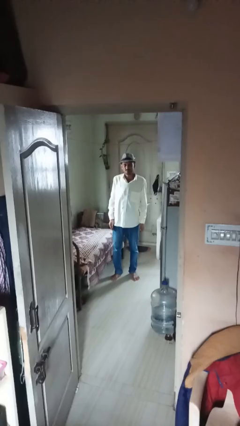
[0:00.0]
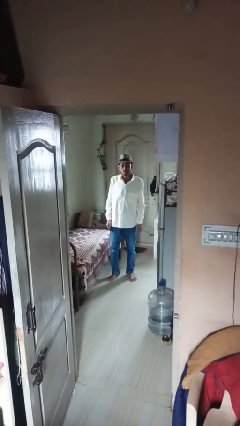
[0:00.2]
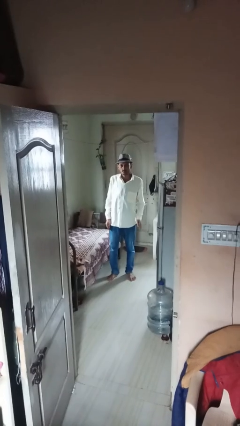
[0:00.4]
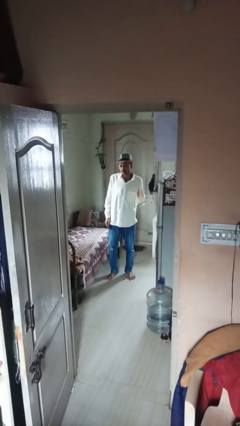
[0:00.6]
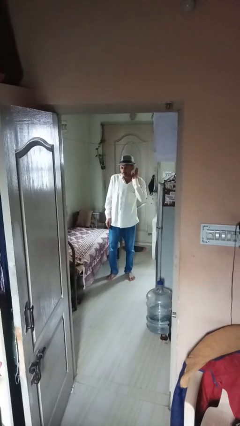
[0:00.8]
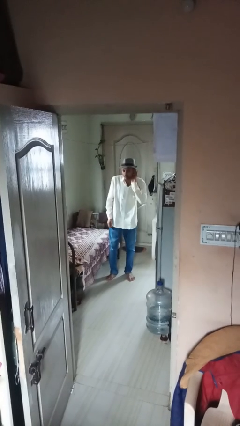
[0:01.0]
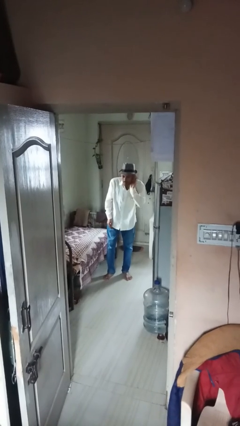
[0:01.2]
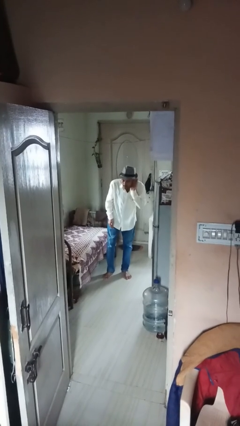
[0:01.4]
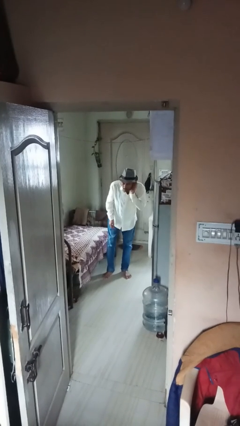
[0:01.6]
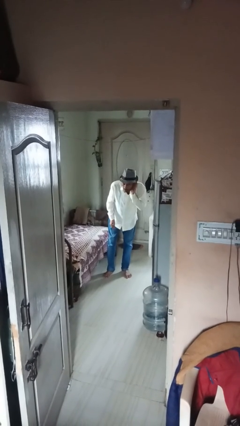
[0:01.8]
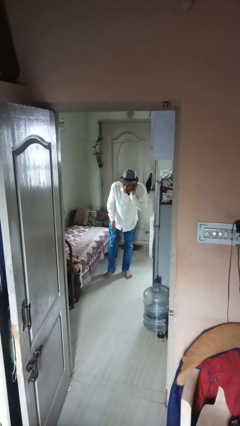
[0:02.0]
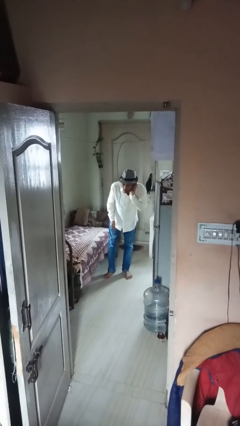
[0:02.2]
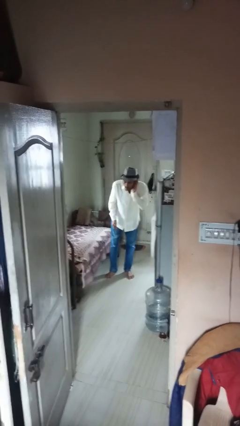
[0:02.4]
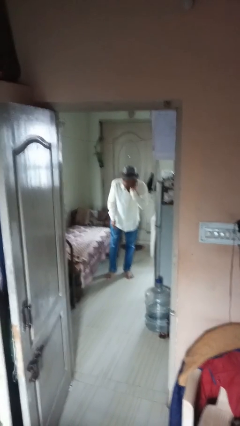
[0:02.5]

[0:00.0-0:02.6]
person gestures listen closely

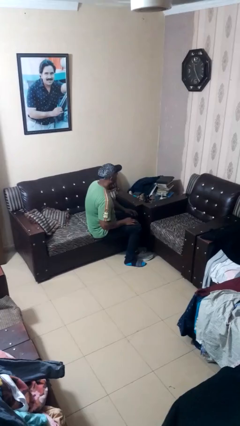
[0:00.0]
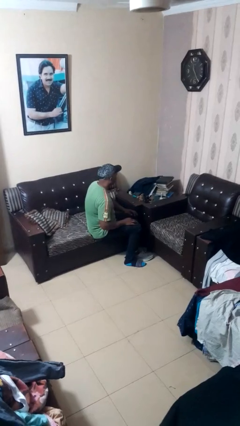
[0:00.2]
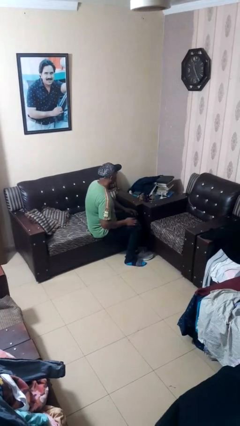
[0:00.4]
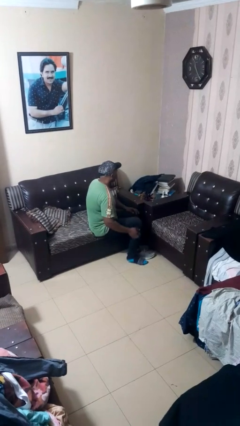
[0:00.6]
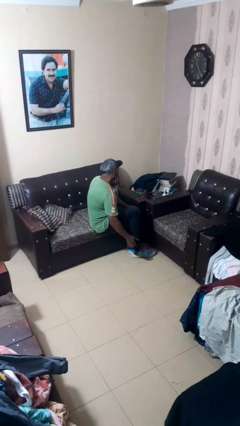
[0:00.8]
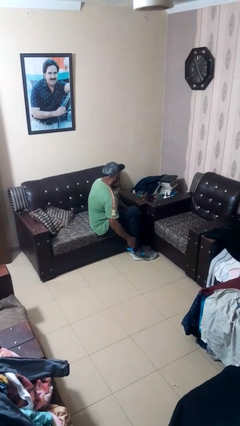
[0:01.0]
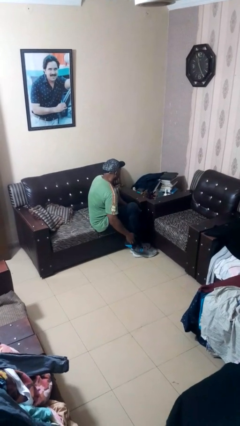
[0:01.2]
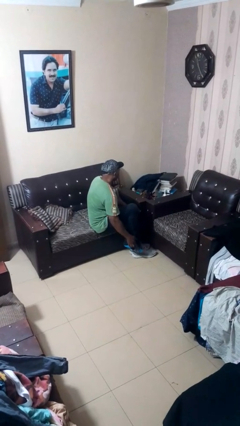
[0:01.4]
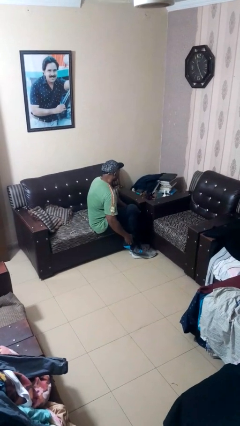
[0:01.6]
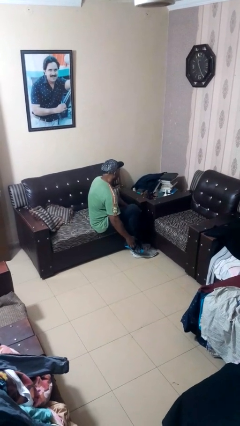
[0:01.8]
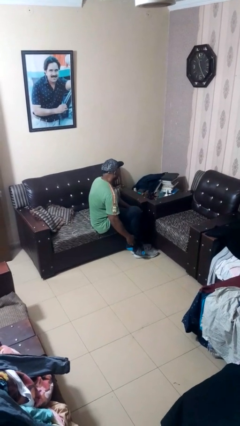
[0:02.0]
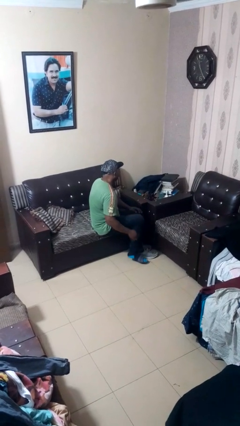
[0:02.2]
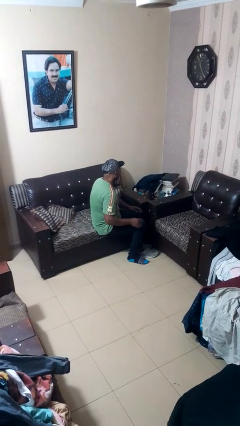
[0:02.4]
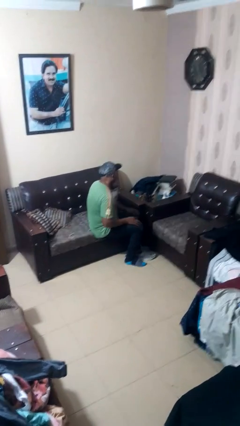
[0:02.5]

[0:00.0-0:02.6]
person rubs foot

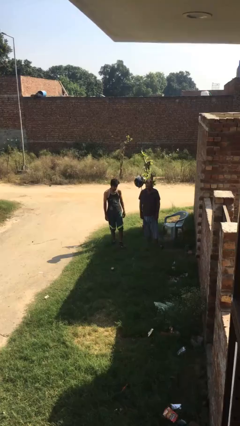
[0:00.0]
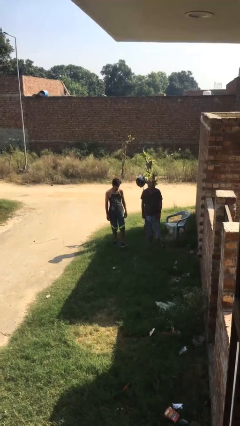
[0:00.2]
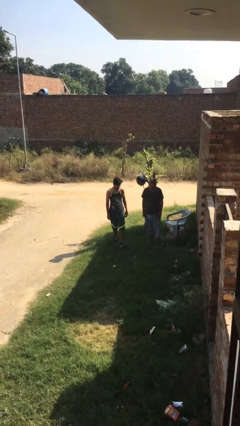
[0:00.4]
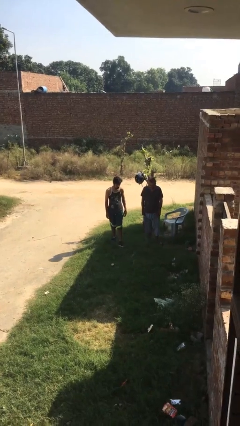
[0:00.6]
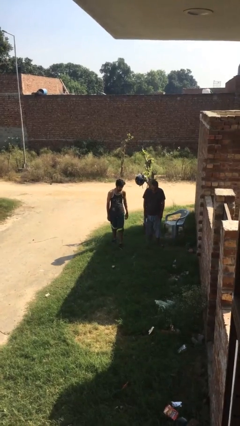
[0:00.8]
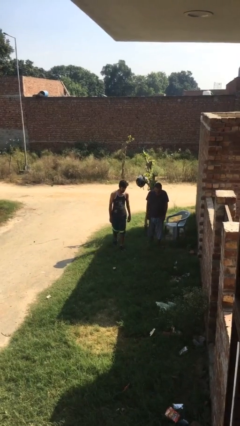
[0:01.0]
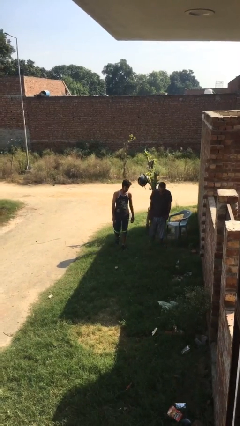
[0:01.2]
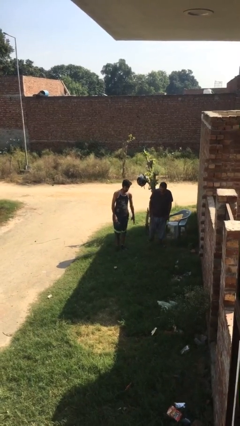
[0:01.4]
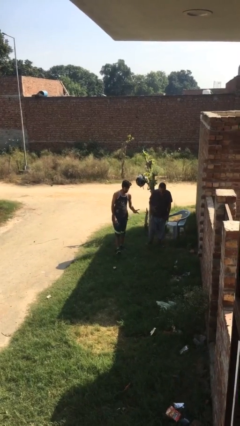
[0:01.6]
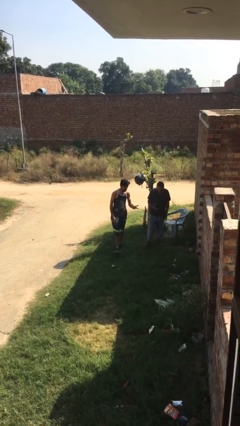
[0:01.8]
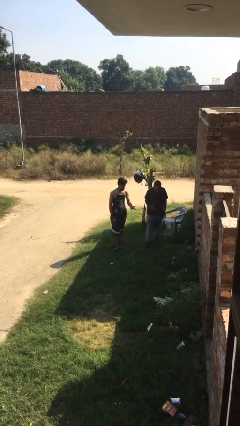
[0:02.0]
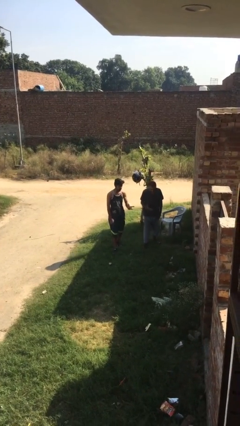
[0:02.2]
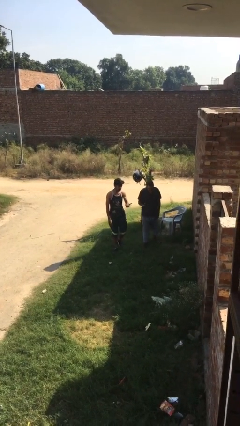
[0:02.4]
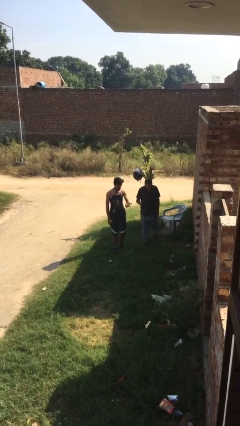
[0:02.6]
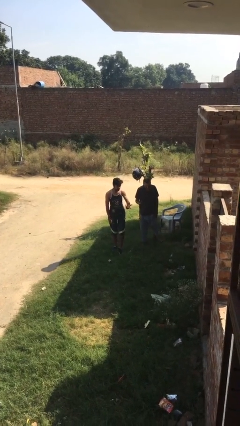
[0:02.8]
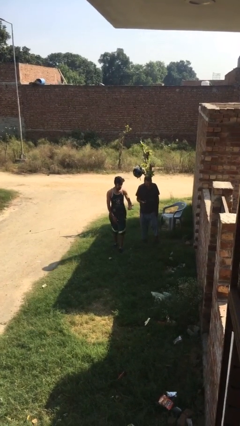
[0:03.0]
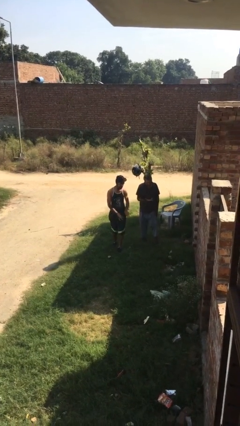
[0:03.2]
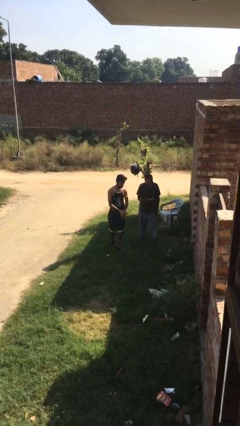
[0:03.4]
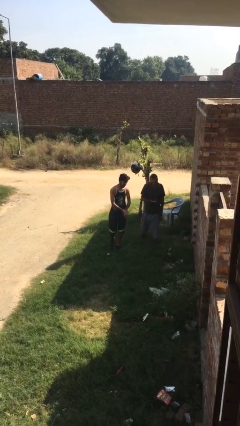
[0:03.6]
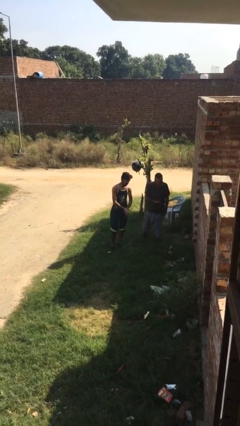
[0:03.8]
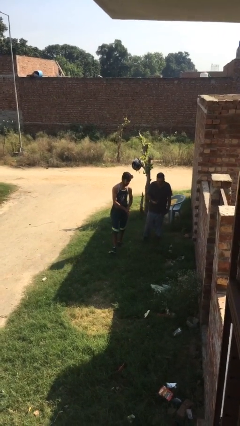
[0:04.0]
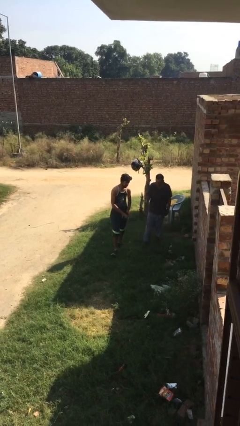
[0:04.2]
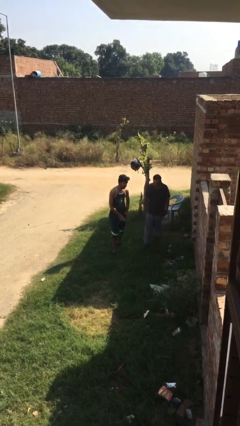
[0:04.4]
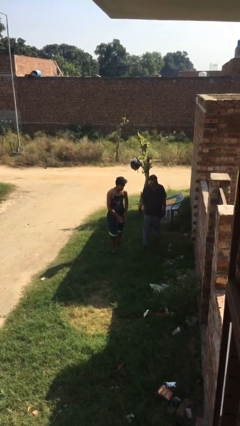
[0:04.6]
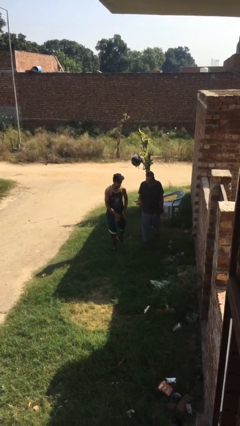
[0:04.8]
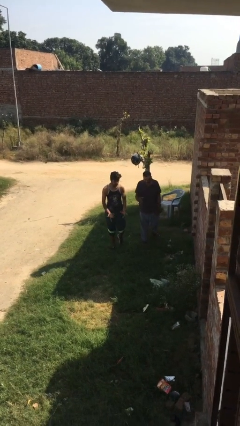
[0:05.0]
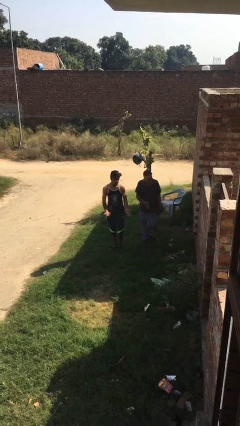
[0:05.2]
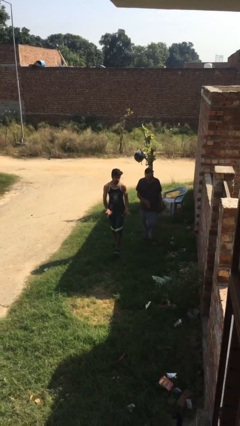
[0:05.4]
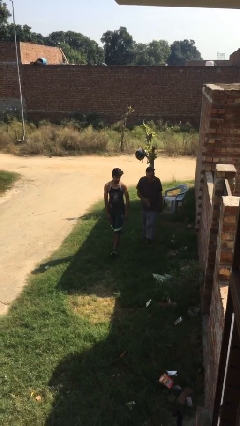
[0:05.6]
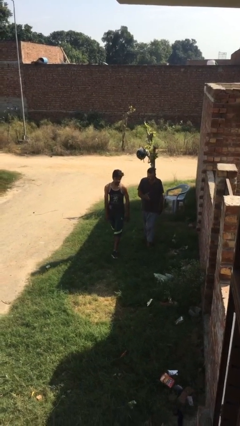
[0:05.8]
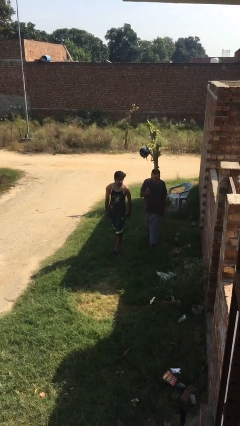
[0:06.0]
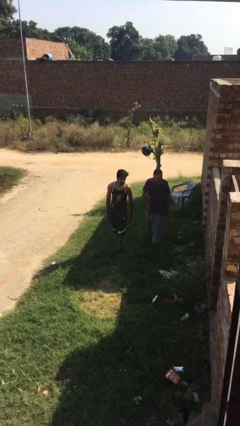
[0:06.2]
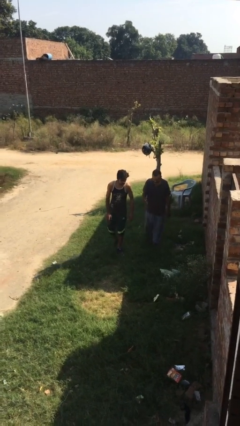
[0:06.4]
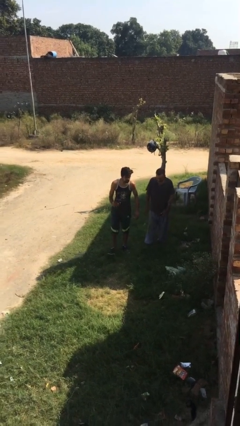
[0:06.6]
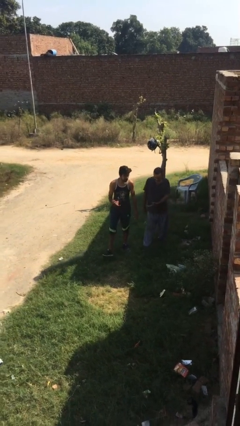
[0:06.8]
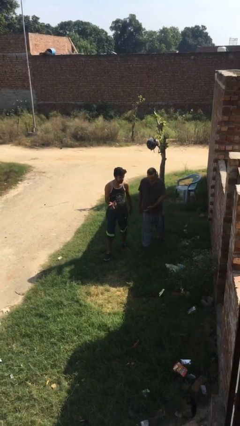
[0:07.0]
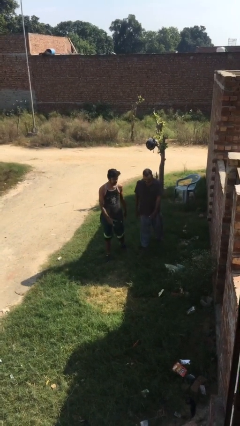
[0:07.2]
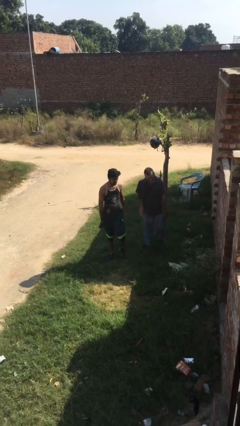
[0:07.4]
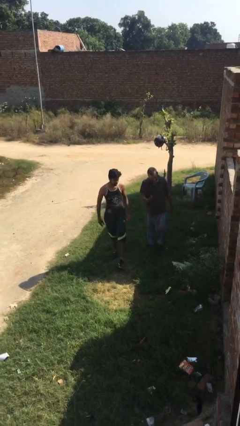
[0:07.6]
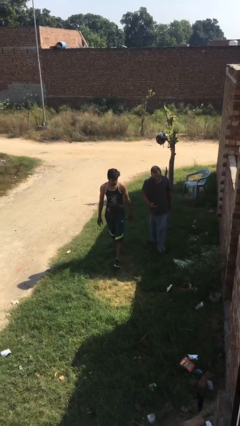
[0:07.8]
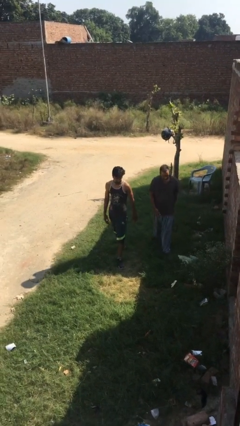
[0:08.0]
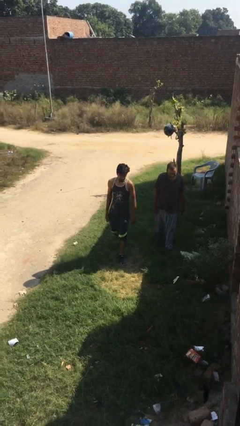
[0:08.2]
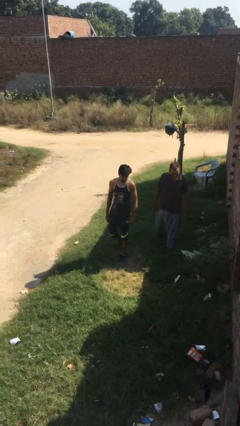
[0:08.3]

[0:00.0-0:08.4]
person talks to person

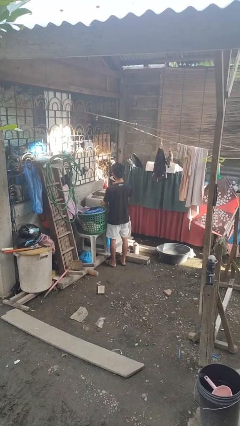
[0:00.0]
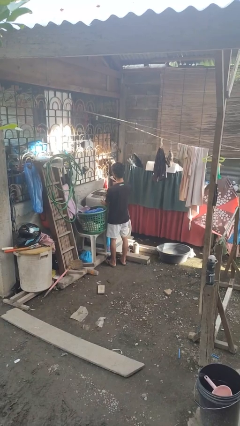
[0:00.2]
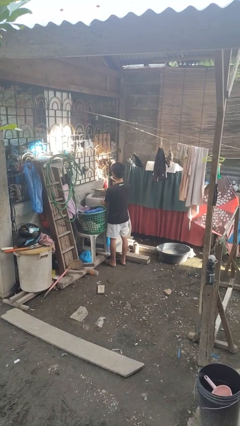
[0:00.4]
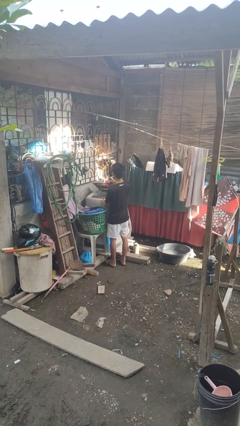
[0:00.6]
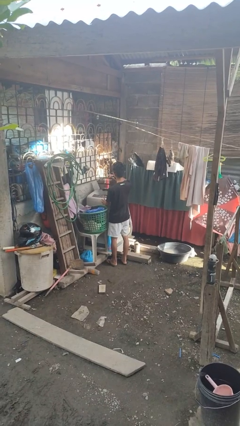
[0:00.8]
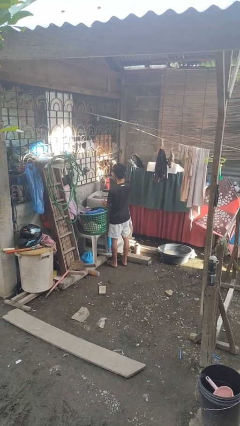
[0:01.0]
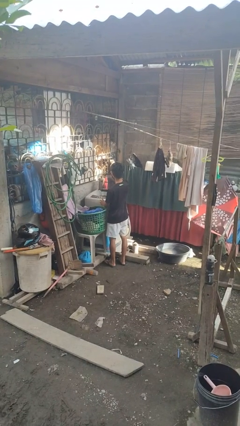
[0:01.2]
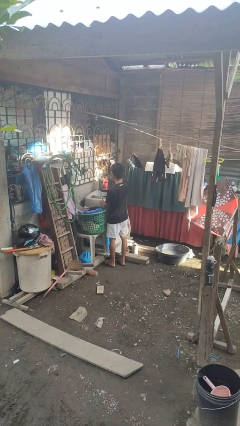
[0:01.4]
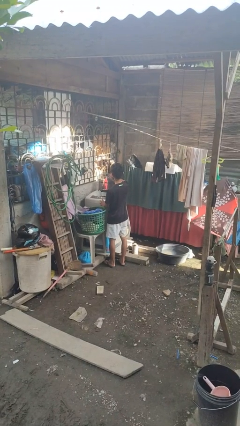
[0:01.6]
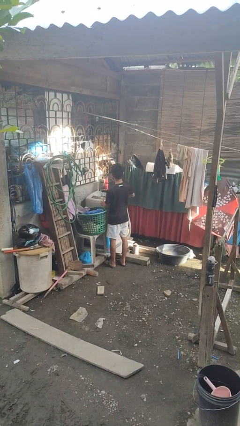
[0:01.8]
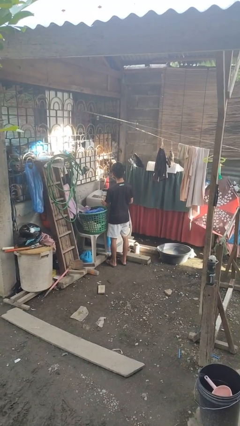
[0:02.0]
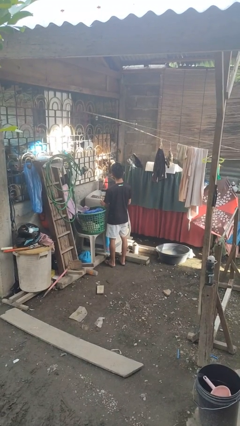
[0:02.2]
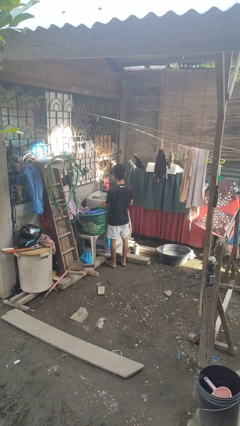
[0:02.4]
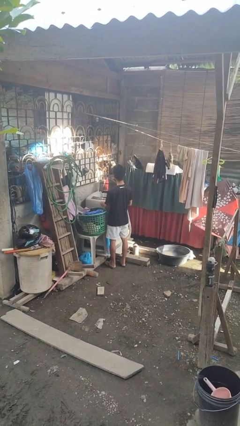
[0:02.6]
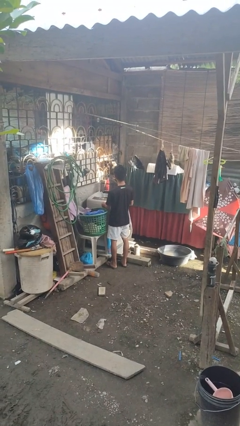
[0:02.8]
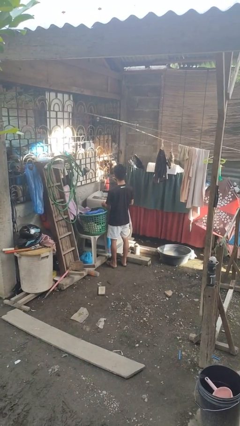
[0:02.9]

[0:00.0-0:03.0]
person opens clothes washer

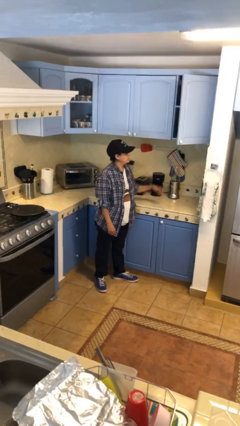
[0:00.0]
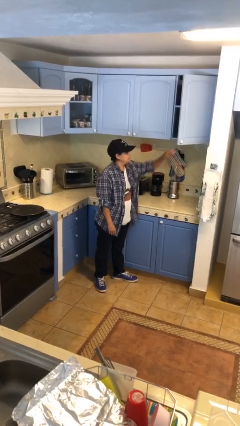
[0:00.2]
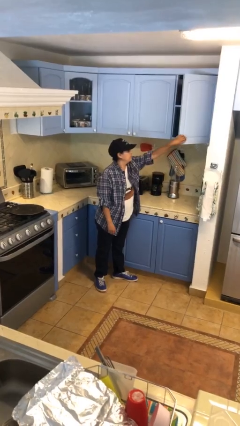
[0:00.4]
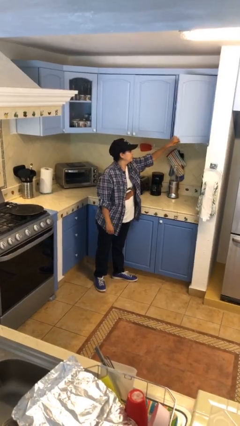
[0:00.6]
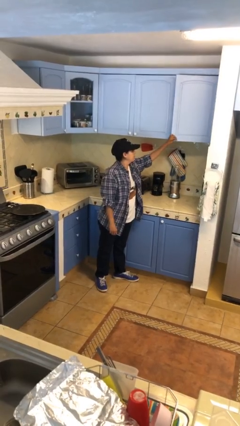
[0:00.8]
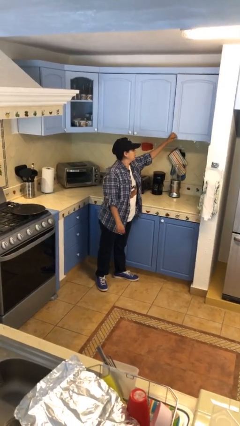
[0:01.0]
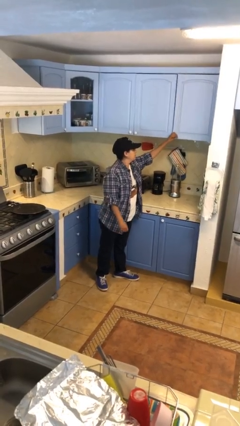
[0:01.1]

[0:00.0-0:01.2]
person closes cabinet
